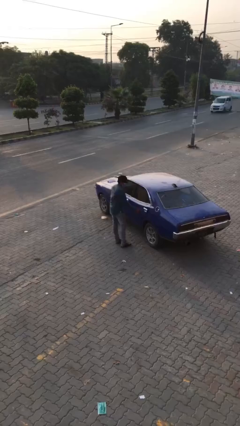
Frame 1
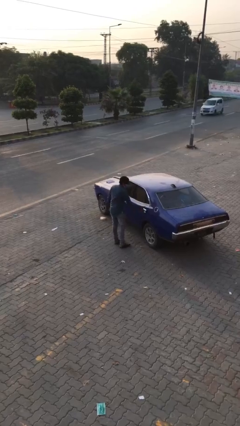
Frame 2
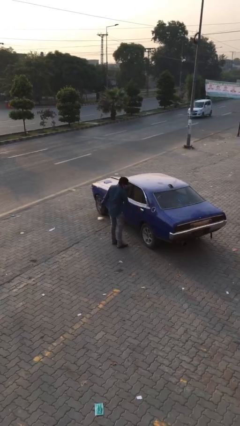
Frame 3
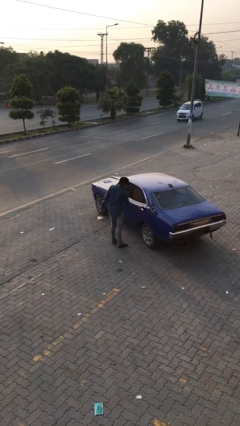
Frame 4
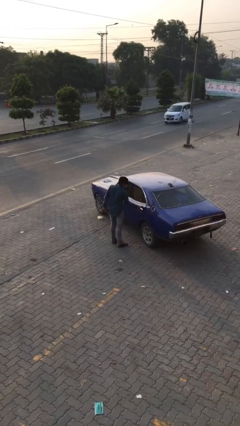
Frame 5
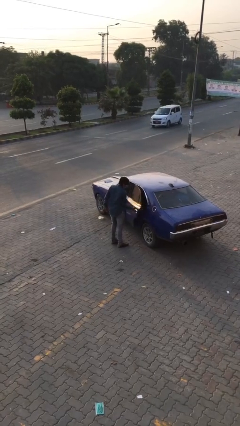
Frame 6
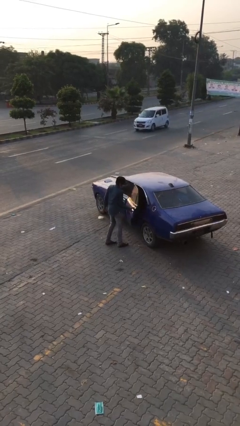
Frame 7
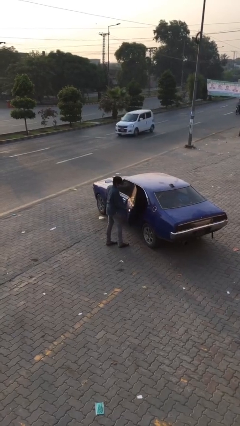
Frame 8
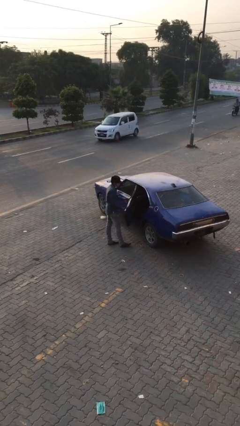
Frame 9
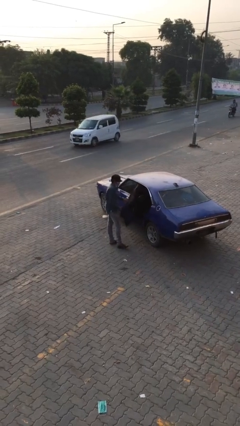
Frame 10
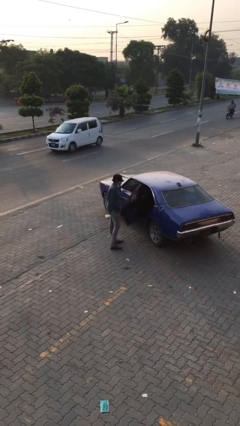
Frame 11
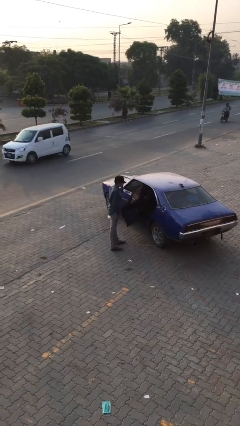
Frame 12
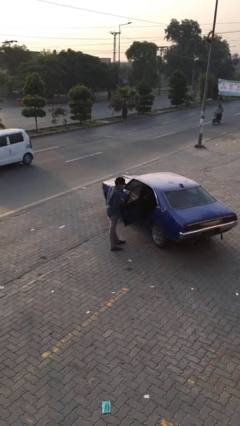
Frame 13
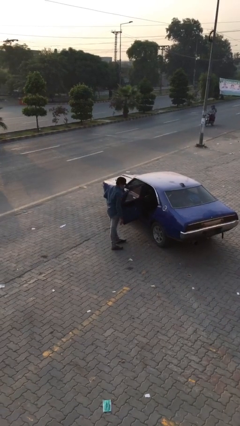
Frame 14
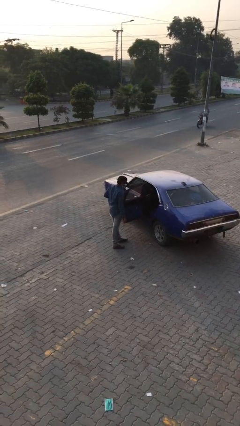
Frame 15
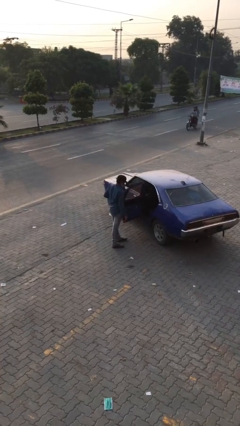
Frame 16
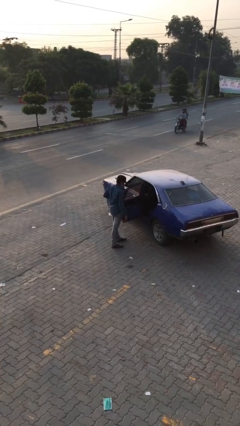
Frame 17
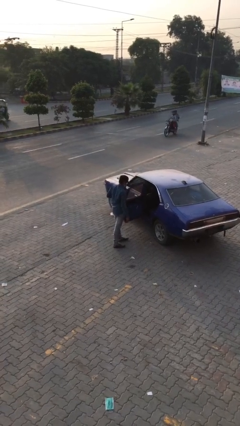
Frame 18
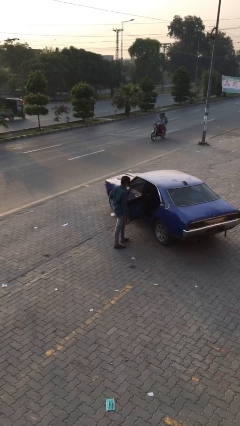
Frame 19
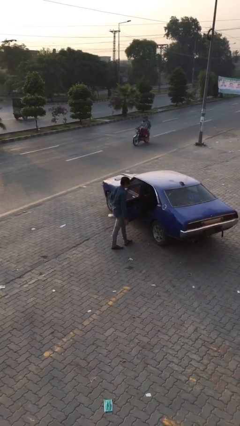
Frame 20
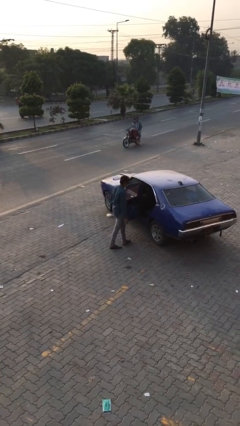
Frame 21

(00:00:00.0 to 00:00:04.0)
person opens car door

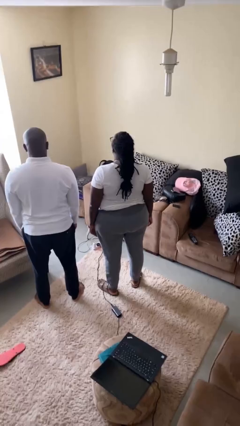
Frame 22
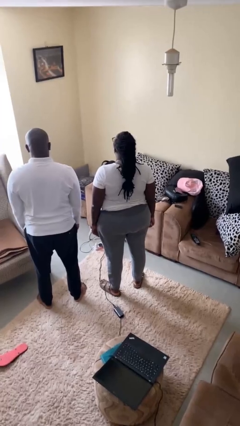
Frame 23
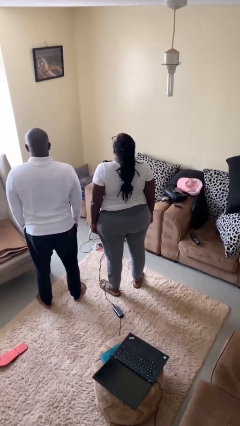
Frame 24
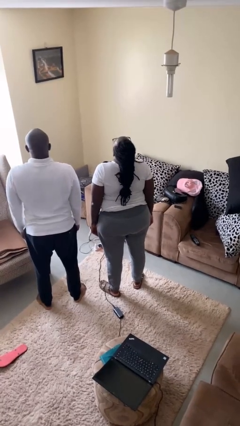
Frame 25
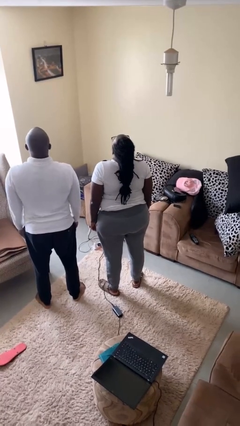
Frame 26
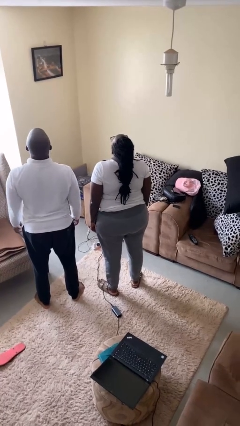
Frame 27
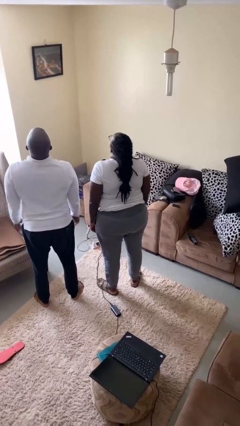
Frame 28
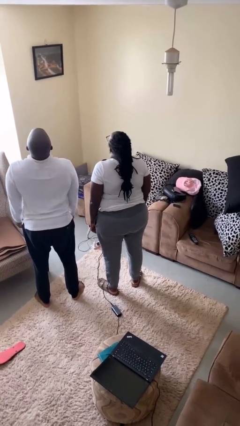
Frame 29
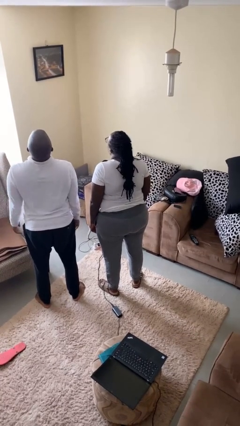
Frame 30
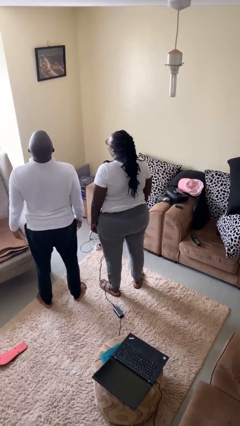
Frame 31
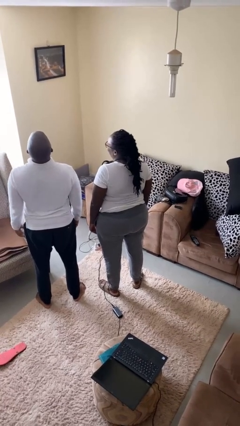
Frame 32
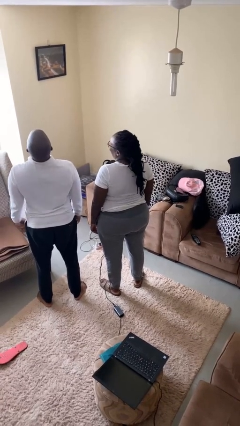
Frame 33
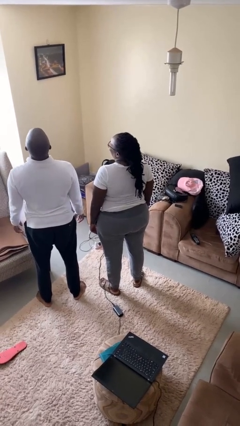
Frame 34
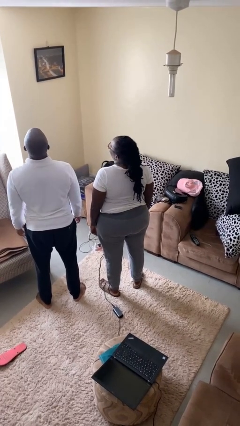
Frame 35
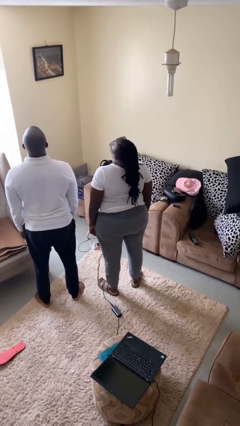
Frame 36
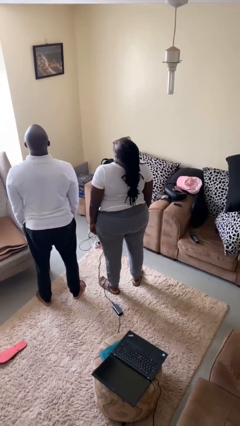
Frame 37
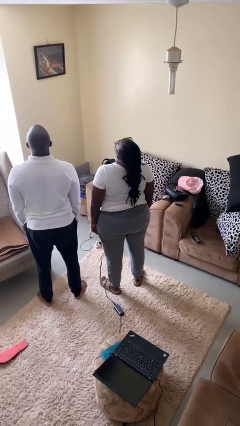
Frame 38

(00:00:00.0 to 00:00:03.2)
person laughs with person

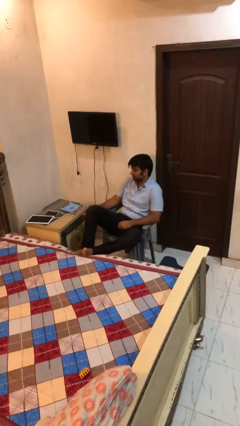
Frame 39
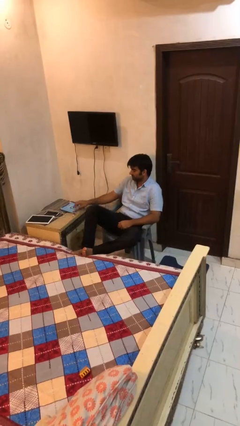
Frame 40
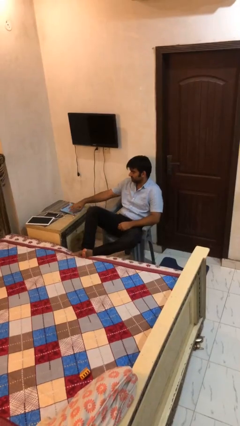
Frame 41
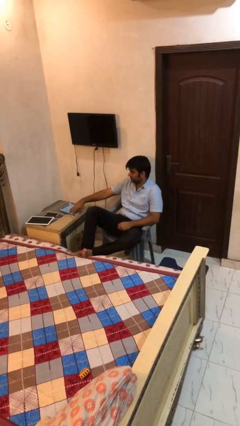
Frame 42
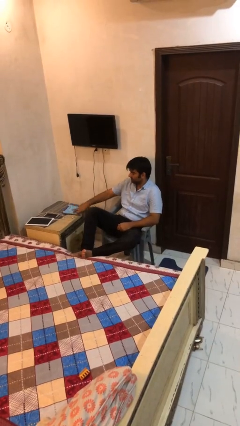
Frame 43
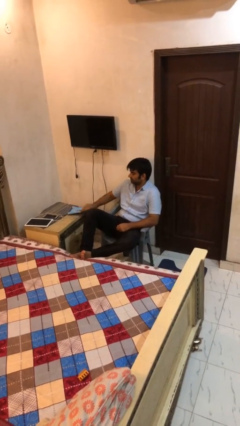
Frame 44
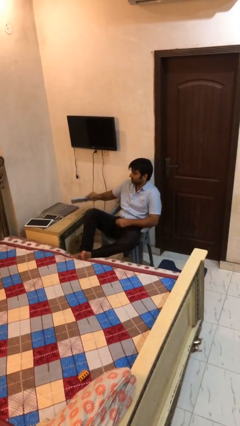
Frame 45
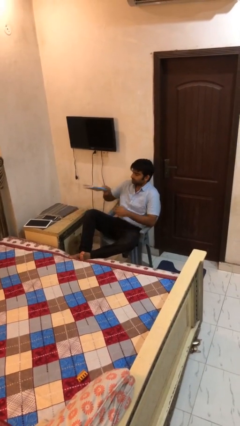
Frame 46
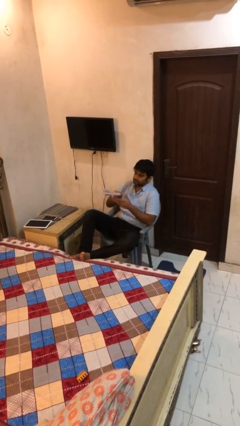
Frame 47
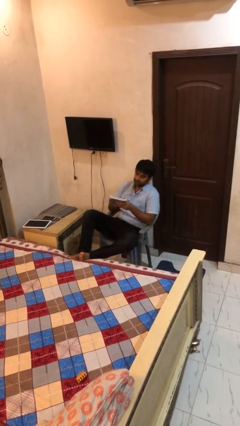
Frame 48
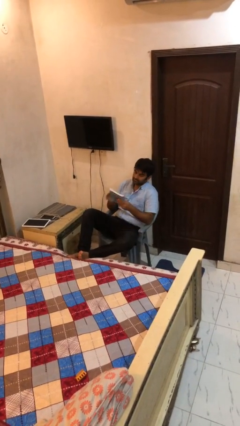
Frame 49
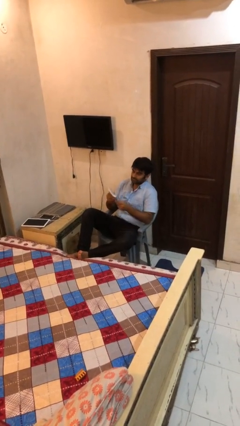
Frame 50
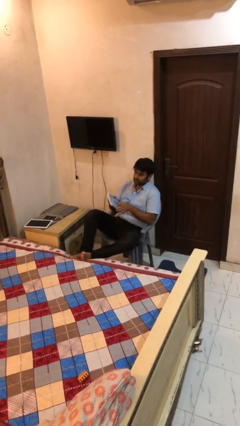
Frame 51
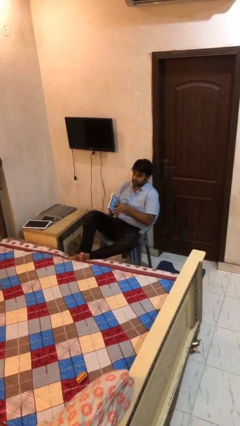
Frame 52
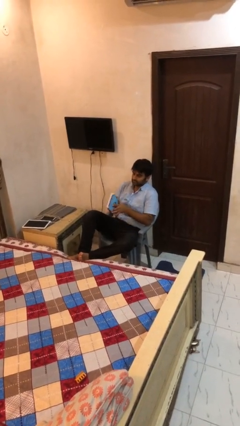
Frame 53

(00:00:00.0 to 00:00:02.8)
person picks up object from table

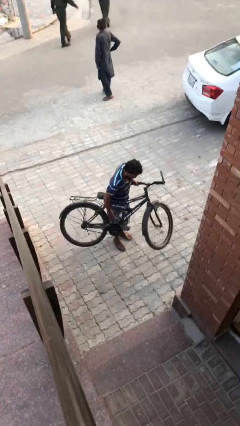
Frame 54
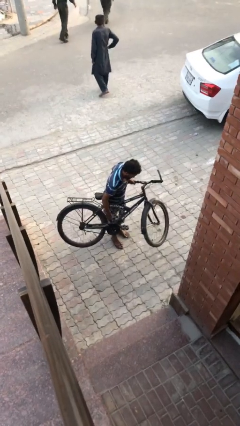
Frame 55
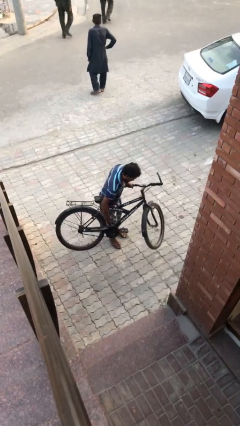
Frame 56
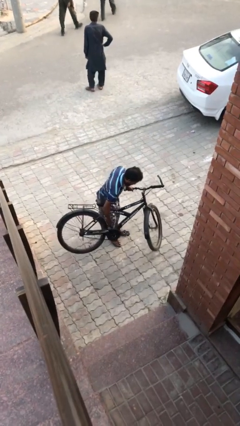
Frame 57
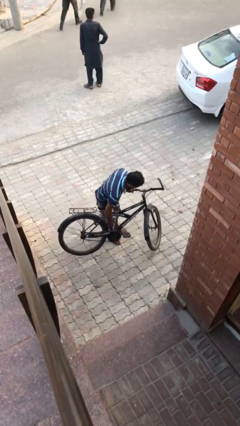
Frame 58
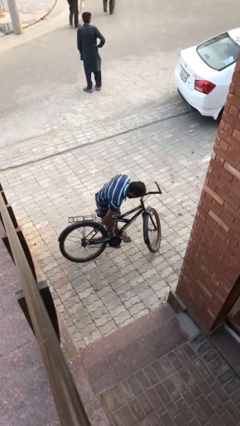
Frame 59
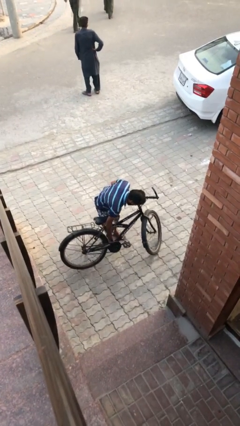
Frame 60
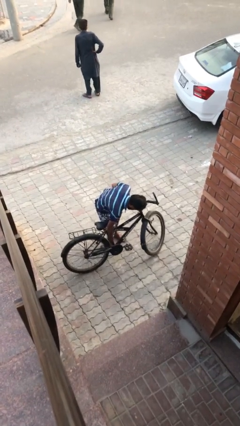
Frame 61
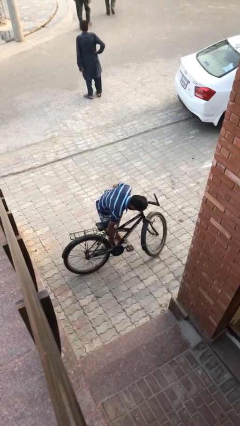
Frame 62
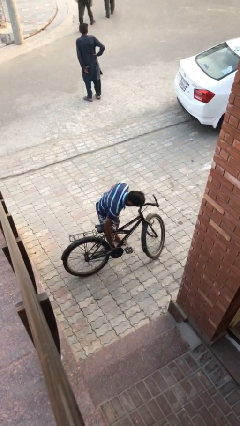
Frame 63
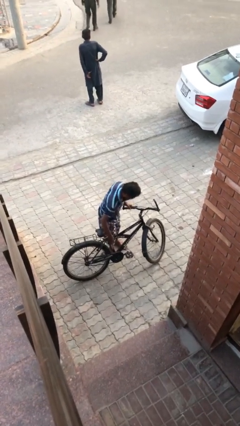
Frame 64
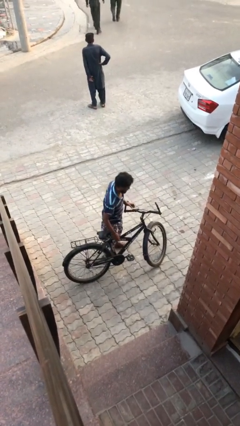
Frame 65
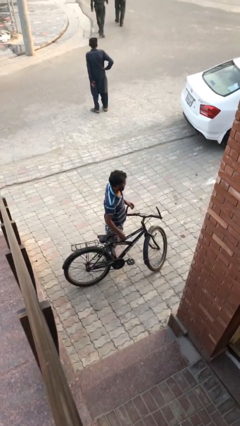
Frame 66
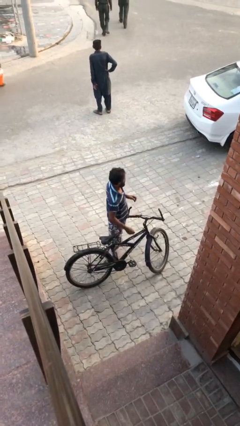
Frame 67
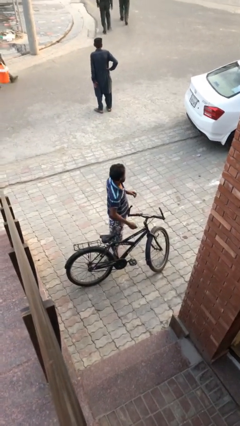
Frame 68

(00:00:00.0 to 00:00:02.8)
person puts down object on floor

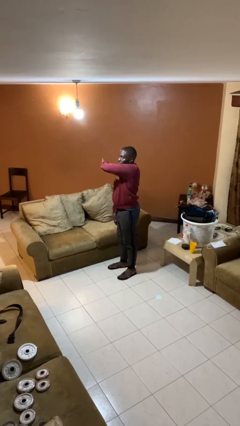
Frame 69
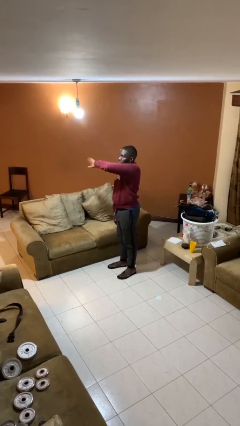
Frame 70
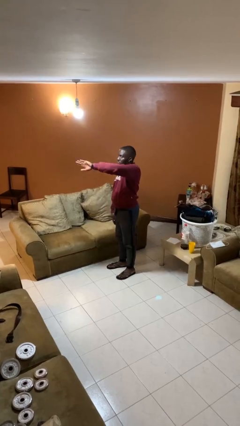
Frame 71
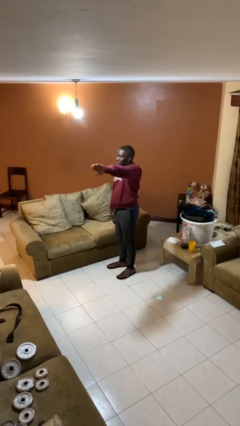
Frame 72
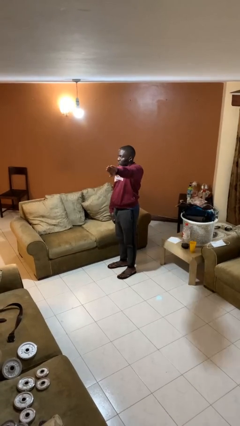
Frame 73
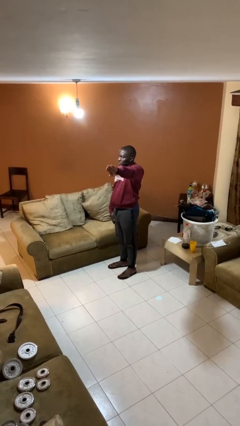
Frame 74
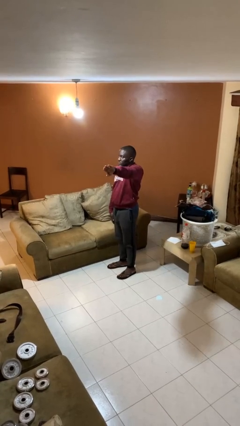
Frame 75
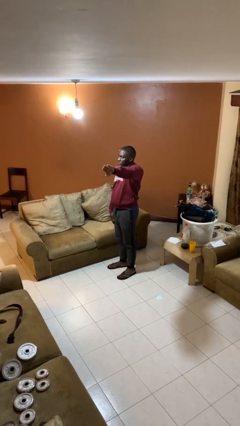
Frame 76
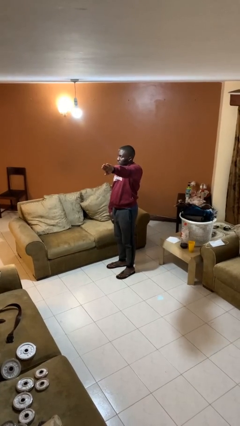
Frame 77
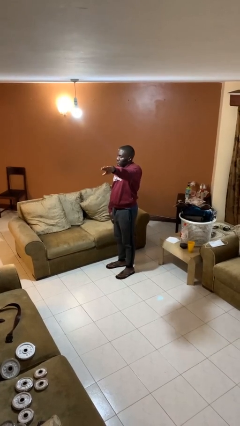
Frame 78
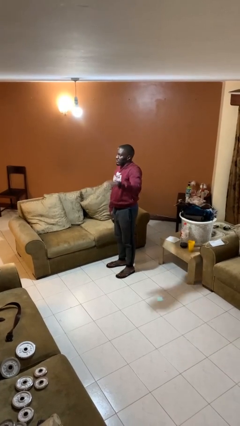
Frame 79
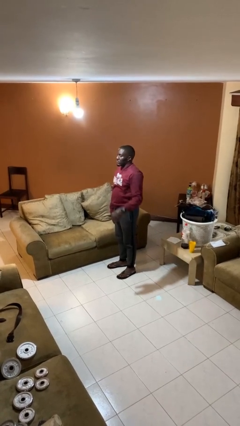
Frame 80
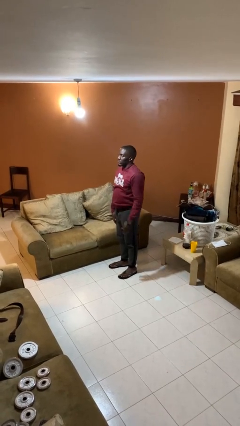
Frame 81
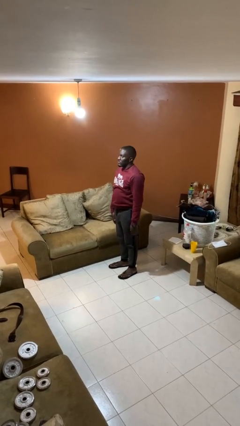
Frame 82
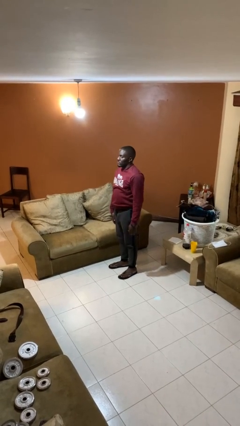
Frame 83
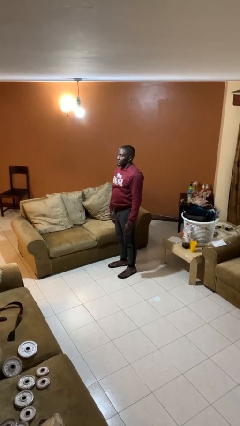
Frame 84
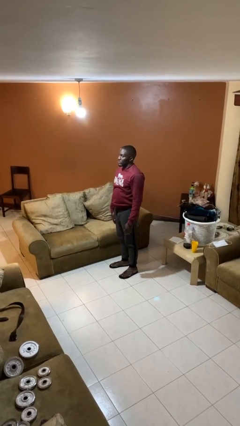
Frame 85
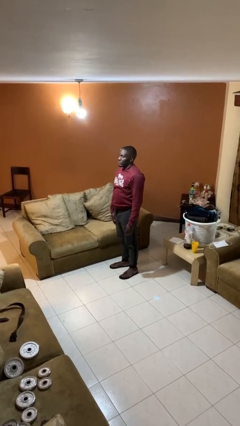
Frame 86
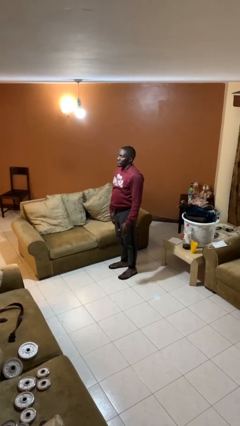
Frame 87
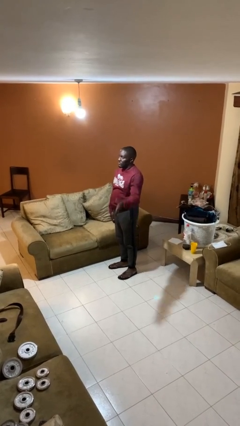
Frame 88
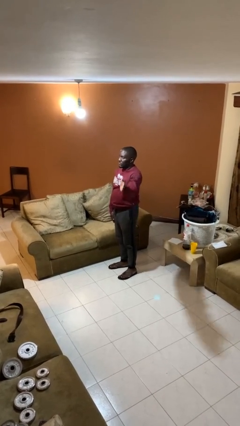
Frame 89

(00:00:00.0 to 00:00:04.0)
person gestures swipe left

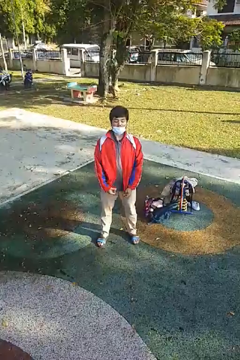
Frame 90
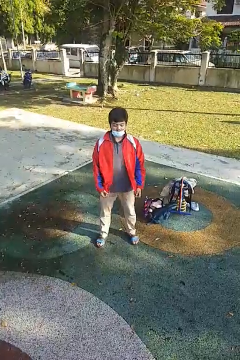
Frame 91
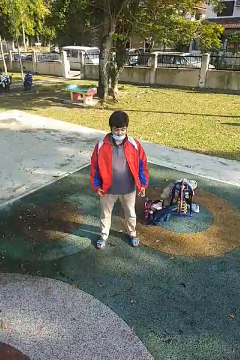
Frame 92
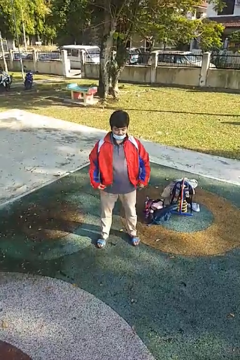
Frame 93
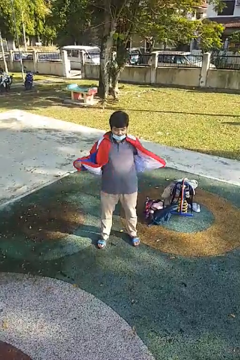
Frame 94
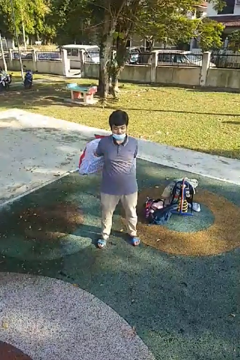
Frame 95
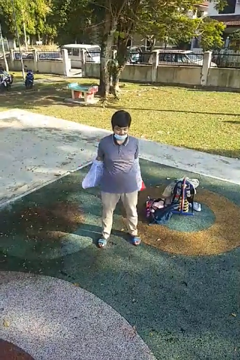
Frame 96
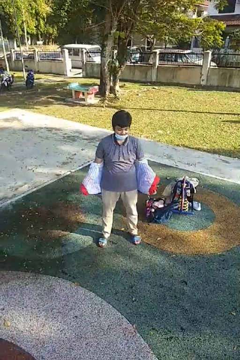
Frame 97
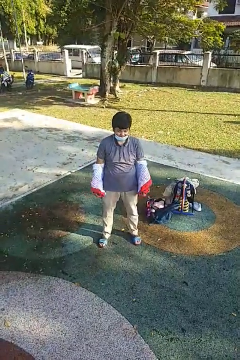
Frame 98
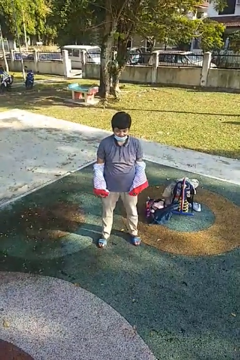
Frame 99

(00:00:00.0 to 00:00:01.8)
person takes off jacket
